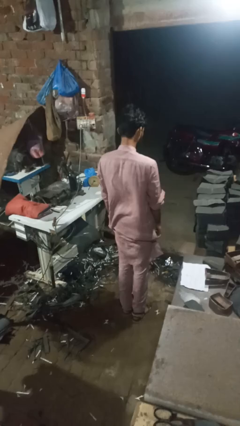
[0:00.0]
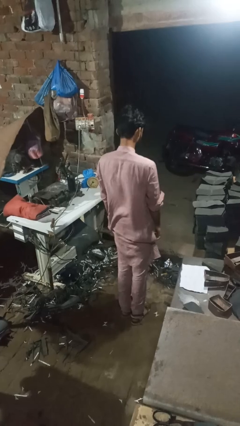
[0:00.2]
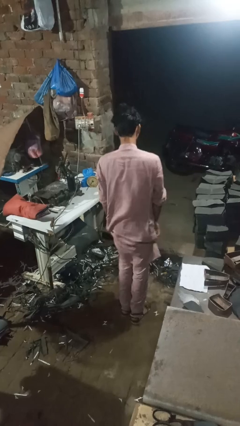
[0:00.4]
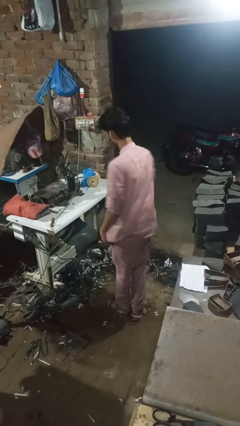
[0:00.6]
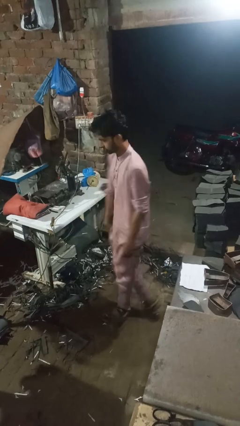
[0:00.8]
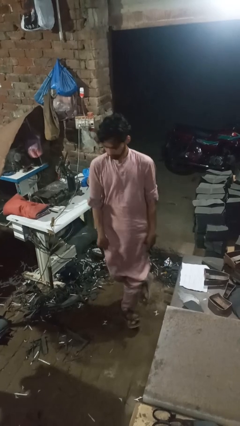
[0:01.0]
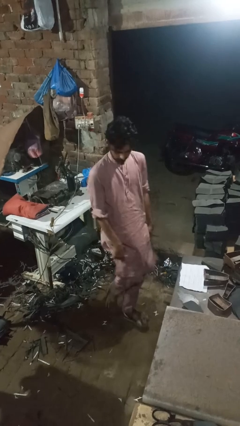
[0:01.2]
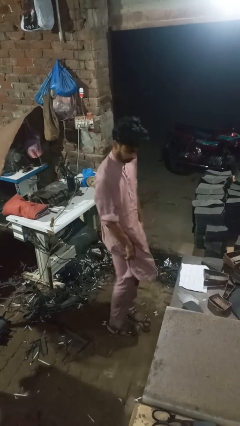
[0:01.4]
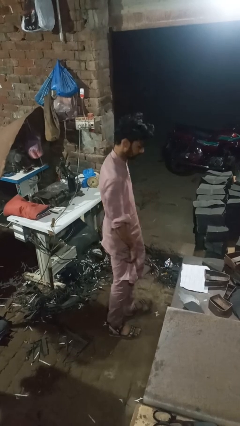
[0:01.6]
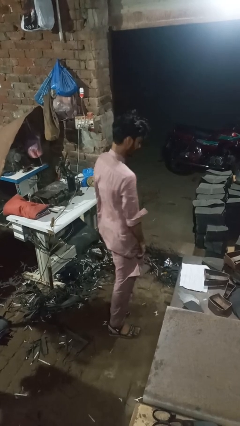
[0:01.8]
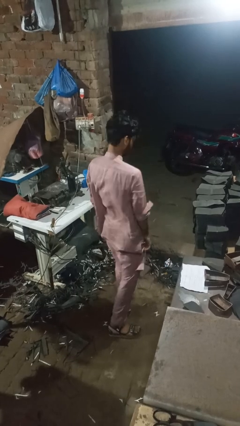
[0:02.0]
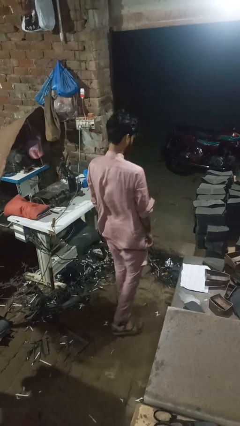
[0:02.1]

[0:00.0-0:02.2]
person twirls

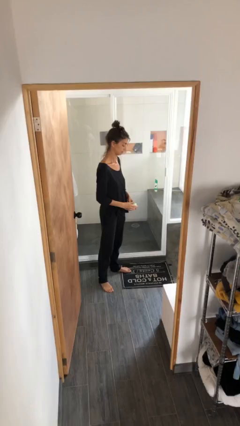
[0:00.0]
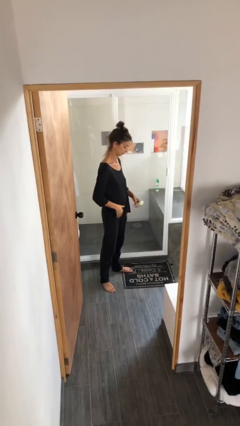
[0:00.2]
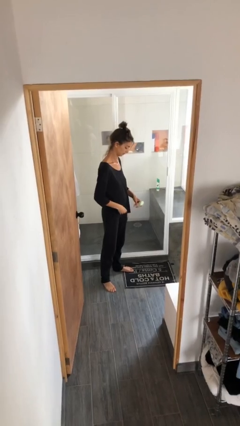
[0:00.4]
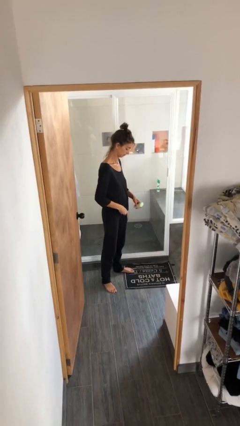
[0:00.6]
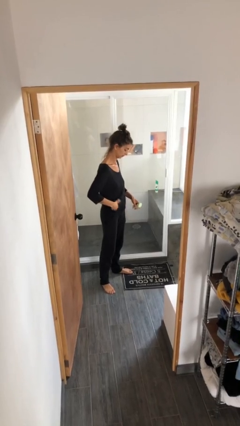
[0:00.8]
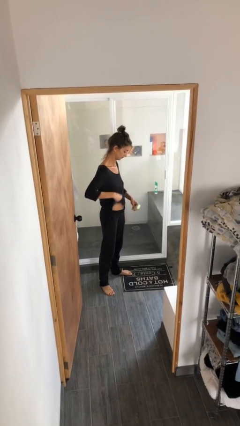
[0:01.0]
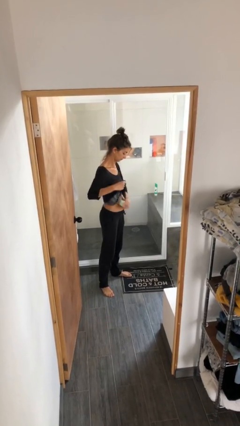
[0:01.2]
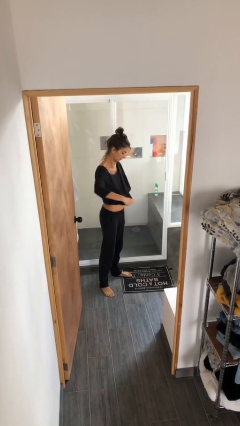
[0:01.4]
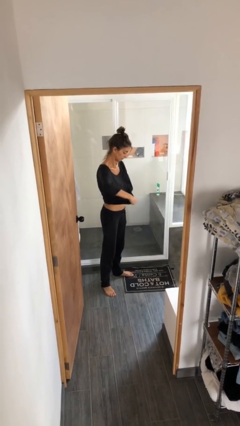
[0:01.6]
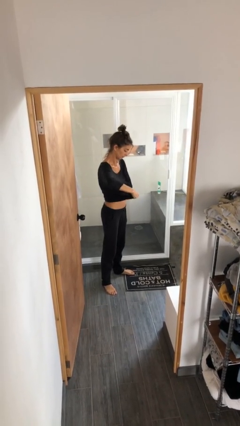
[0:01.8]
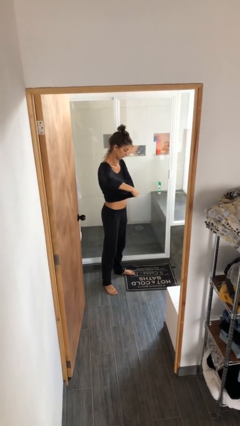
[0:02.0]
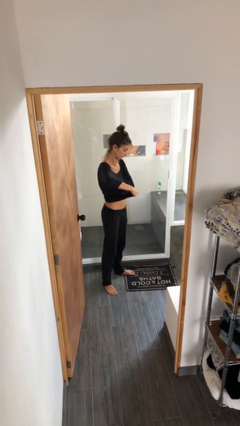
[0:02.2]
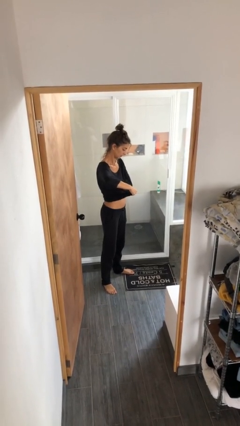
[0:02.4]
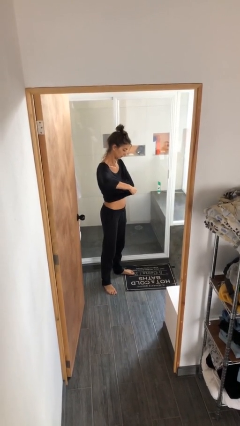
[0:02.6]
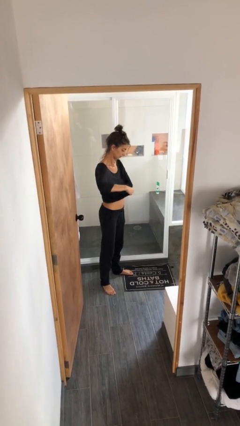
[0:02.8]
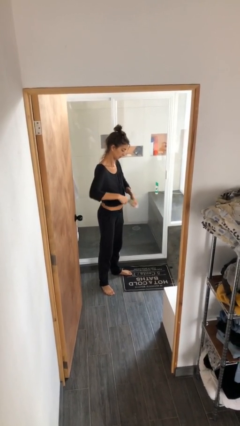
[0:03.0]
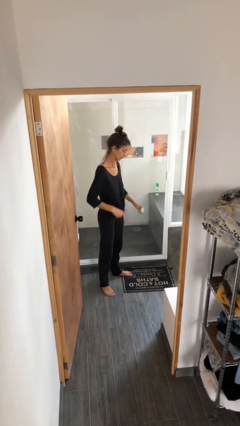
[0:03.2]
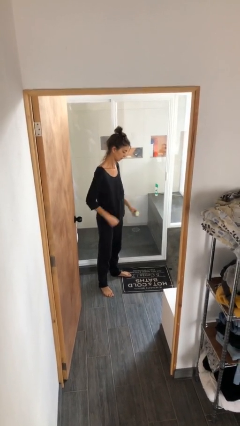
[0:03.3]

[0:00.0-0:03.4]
person applies deodorant

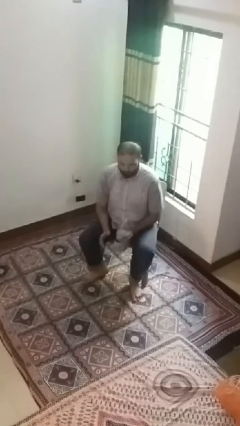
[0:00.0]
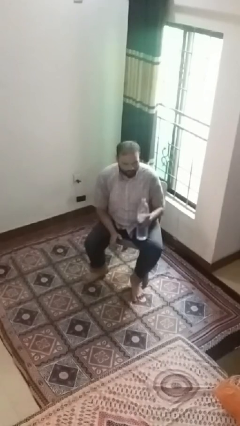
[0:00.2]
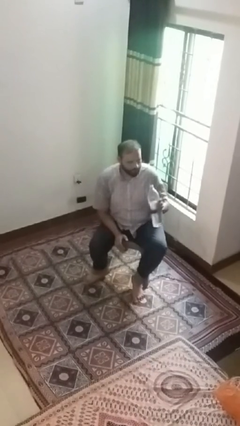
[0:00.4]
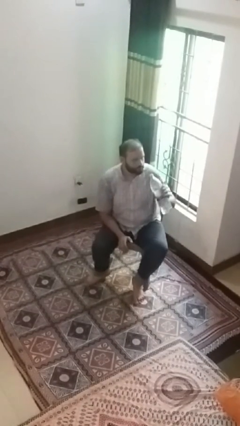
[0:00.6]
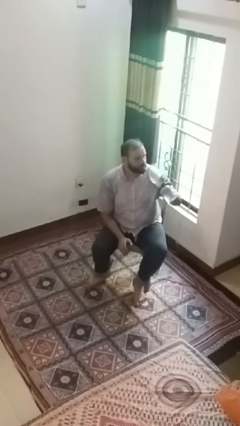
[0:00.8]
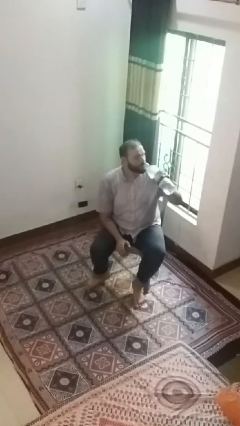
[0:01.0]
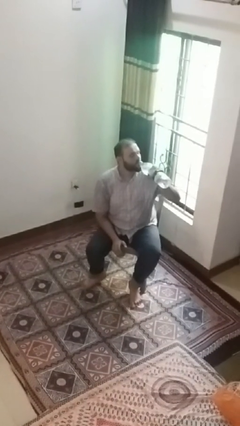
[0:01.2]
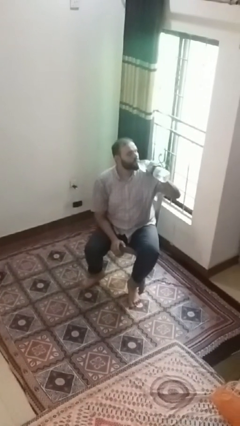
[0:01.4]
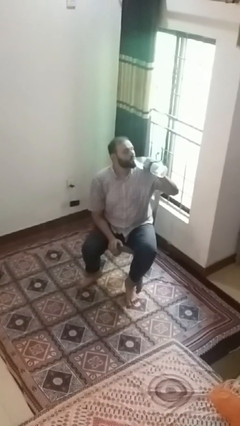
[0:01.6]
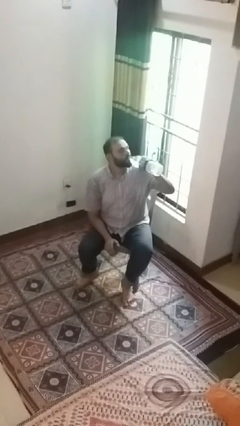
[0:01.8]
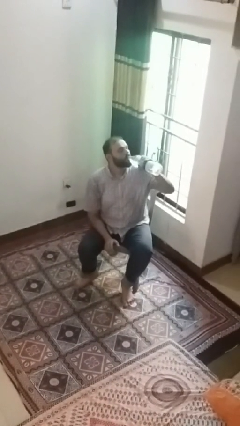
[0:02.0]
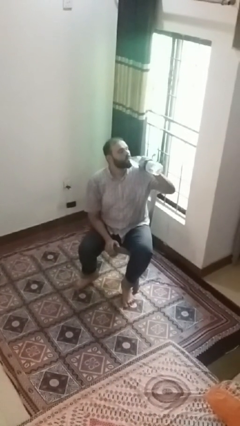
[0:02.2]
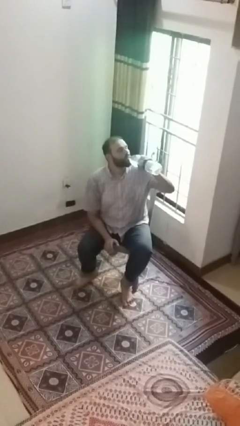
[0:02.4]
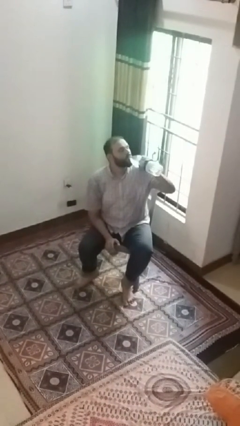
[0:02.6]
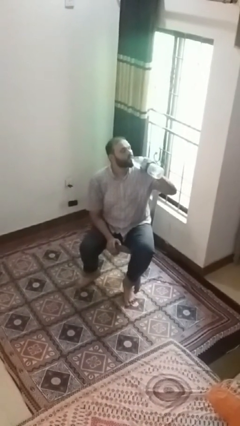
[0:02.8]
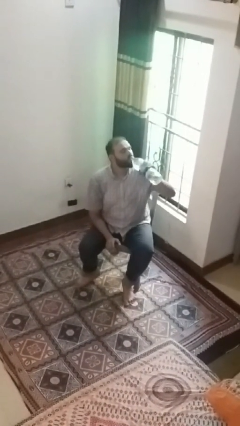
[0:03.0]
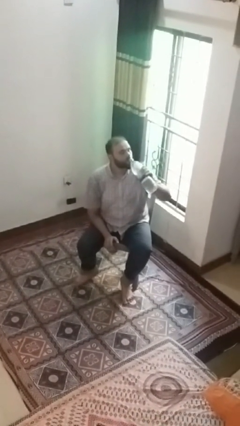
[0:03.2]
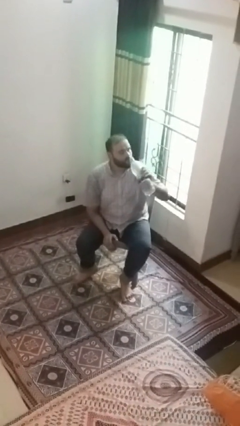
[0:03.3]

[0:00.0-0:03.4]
person drinks from bottle

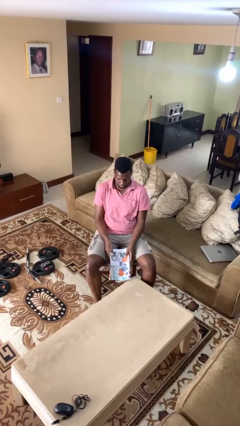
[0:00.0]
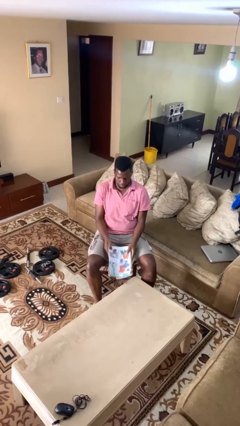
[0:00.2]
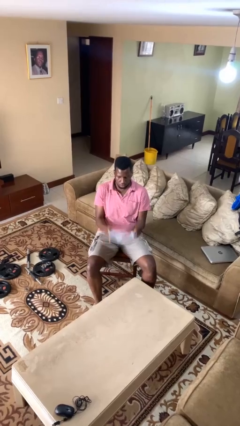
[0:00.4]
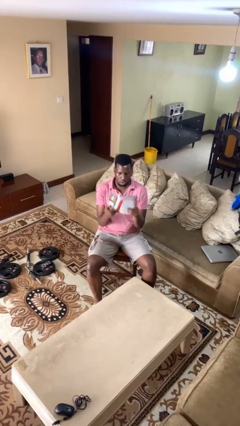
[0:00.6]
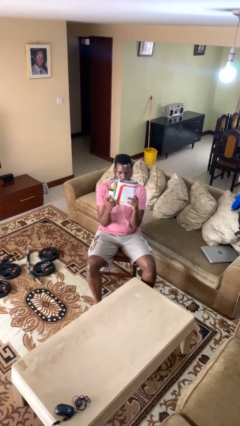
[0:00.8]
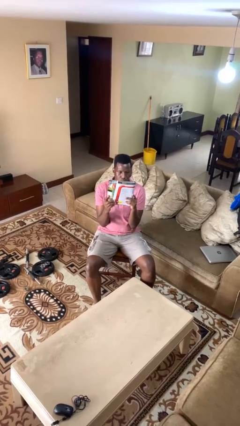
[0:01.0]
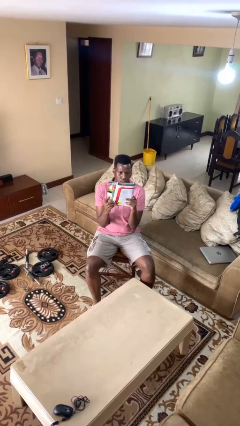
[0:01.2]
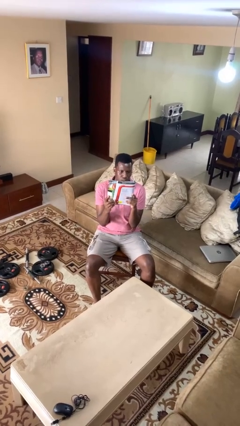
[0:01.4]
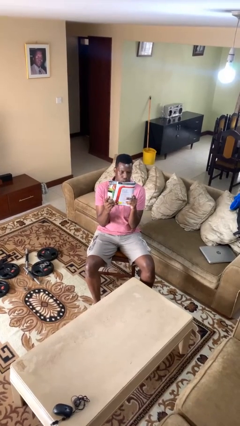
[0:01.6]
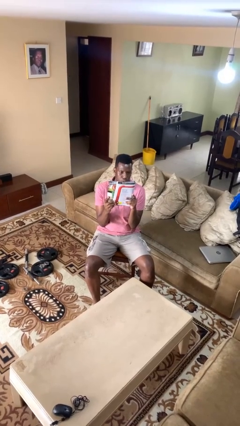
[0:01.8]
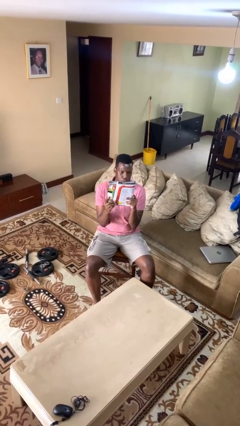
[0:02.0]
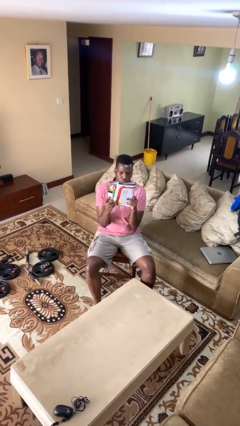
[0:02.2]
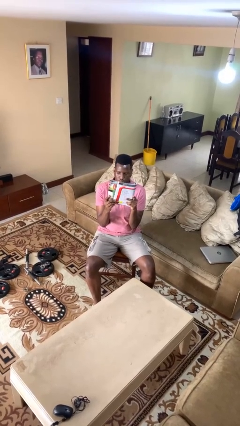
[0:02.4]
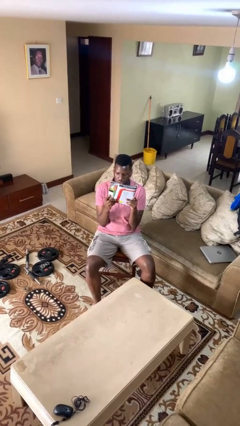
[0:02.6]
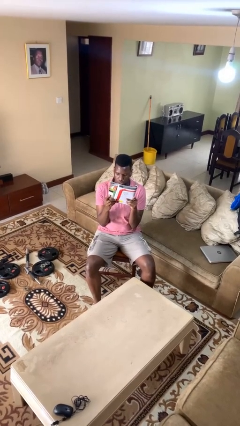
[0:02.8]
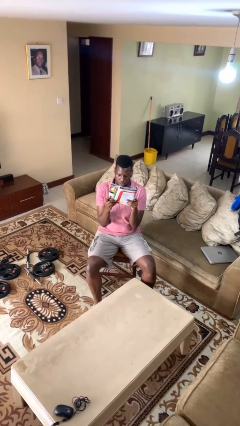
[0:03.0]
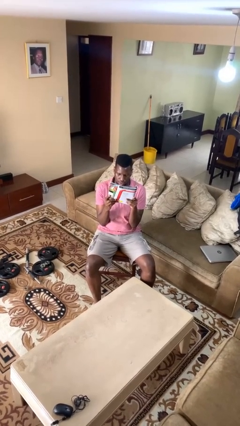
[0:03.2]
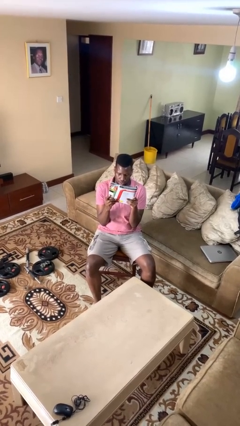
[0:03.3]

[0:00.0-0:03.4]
person reads document

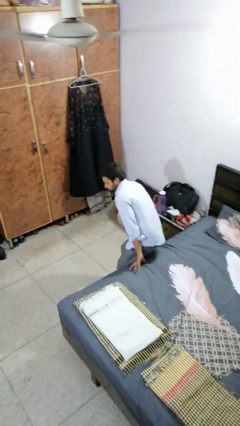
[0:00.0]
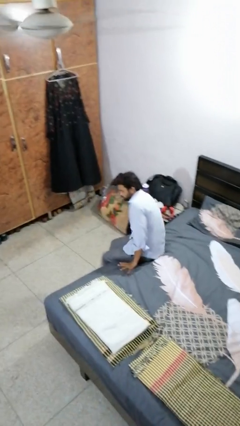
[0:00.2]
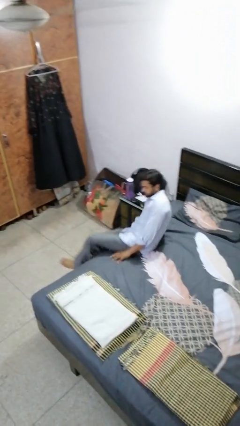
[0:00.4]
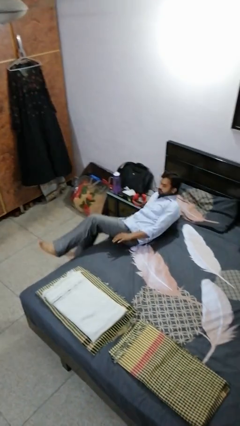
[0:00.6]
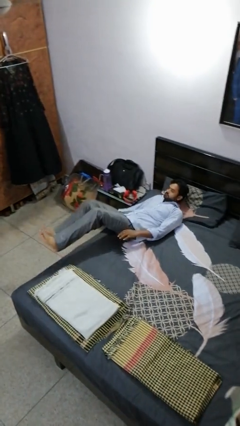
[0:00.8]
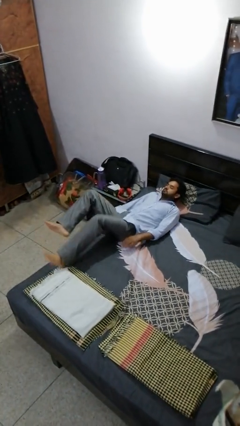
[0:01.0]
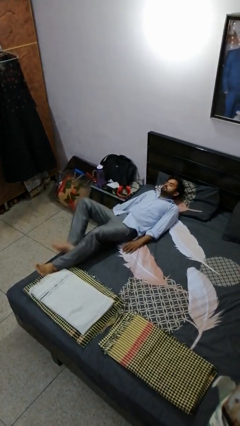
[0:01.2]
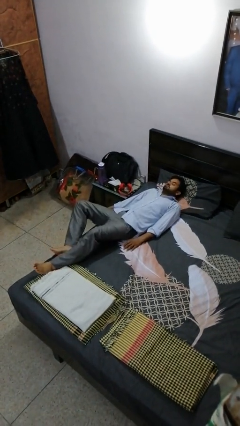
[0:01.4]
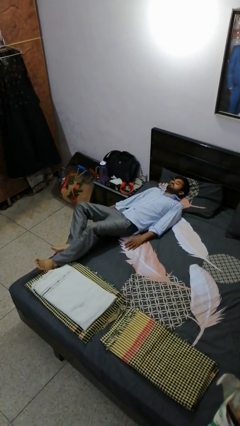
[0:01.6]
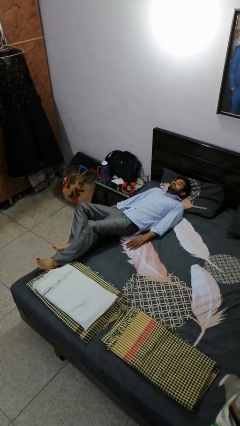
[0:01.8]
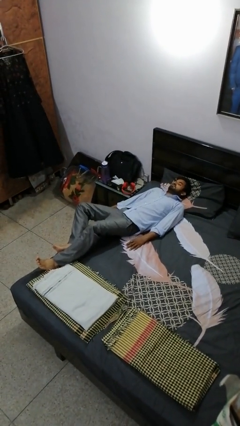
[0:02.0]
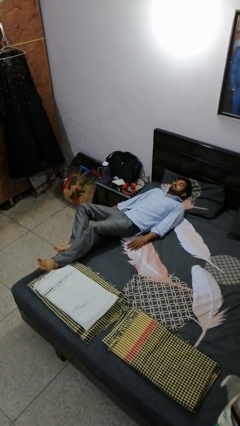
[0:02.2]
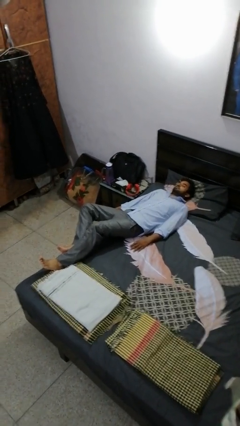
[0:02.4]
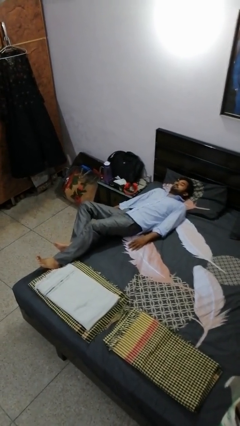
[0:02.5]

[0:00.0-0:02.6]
person lies down on bed

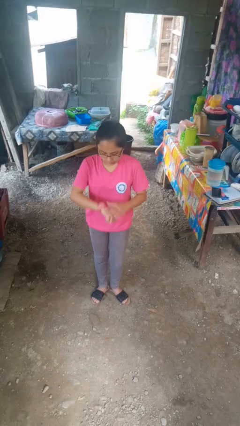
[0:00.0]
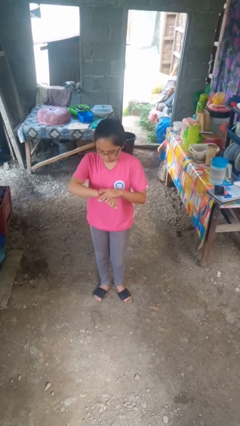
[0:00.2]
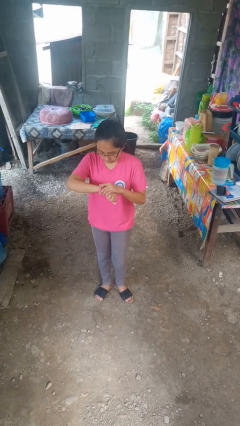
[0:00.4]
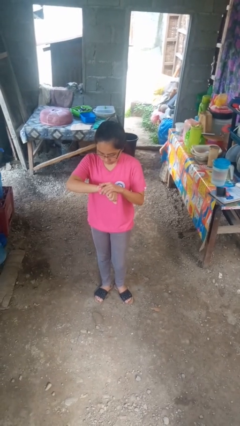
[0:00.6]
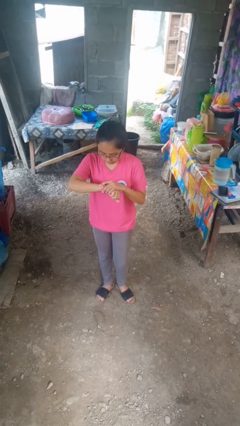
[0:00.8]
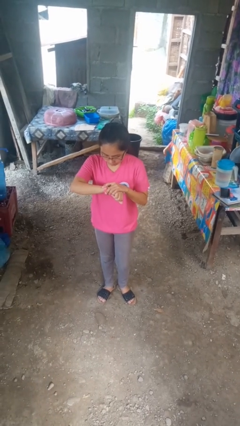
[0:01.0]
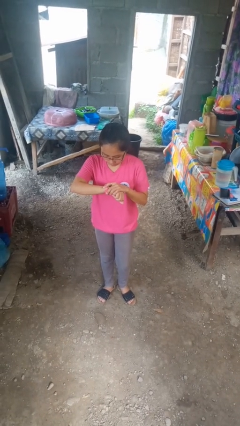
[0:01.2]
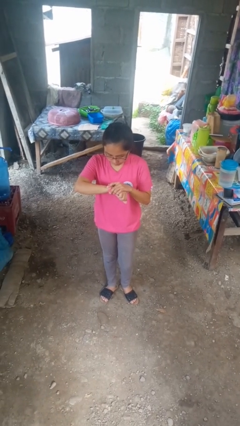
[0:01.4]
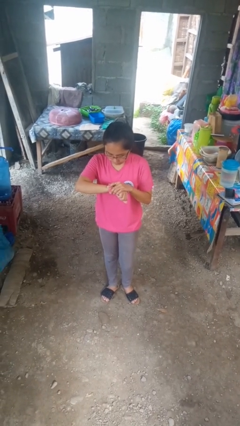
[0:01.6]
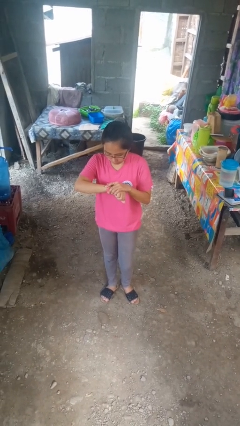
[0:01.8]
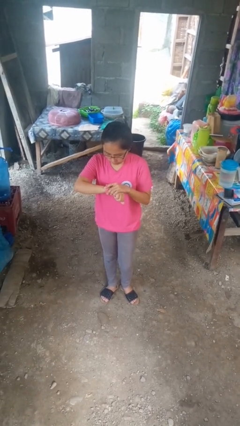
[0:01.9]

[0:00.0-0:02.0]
person looks at wristwatch

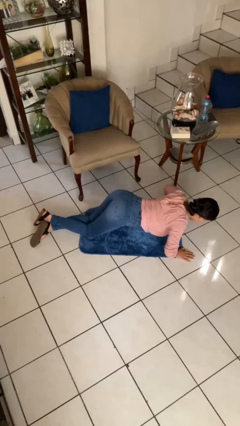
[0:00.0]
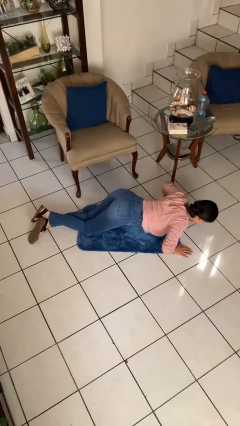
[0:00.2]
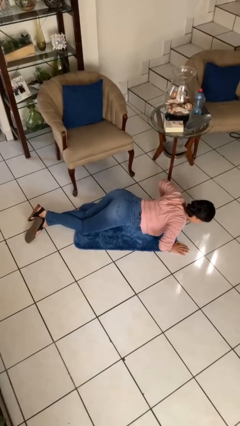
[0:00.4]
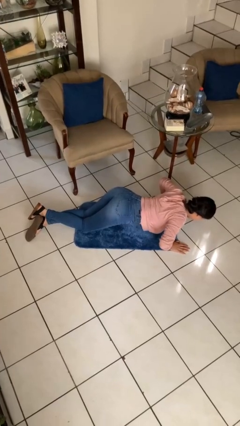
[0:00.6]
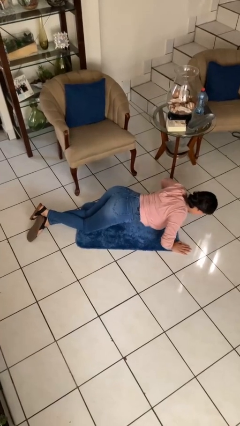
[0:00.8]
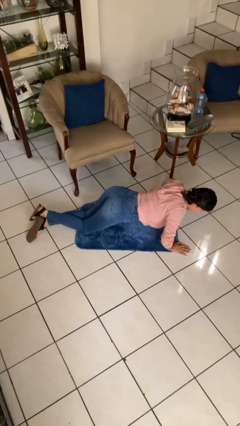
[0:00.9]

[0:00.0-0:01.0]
person exercises with pushup
